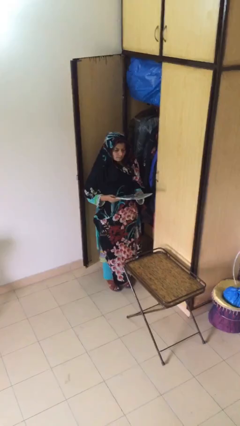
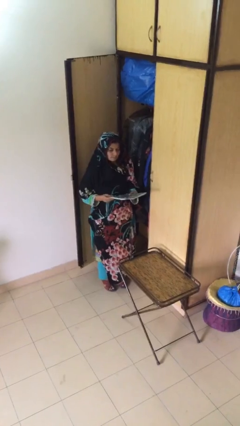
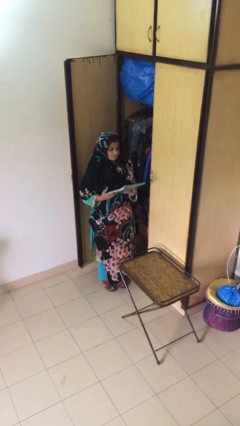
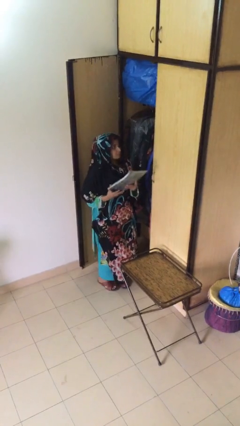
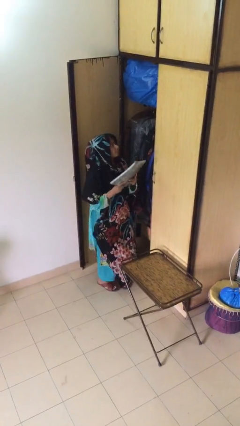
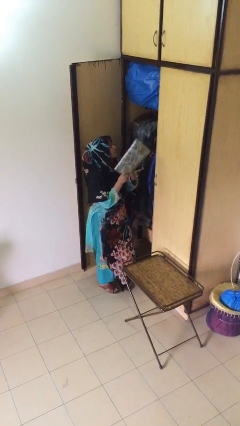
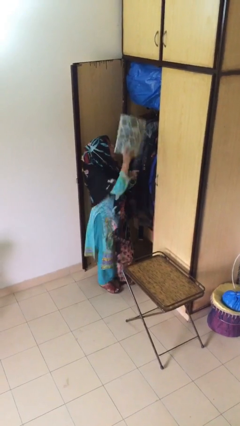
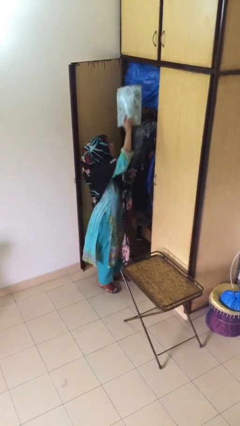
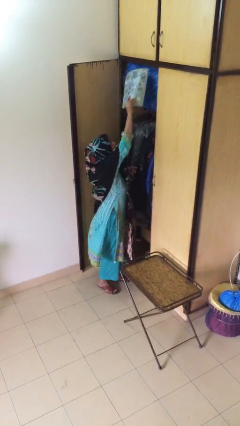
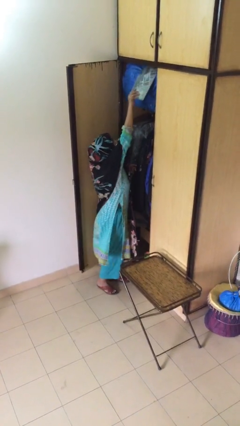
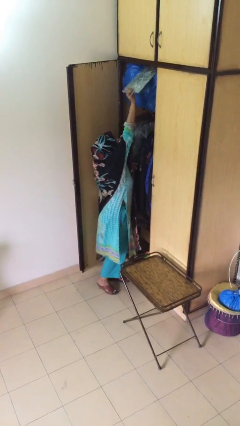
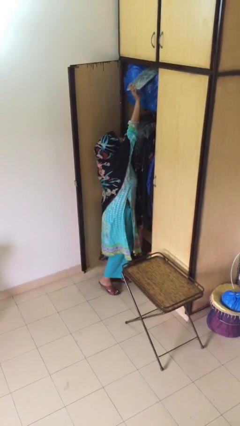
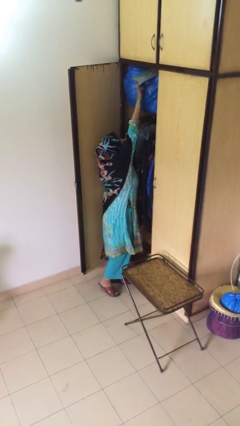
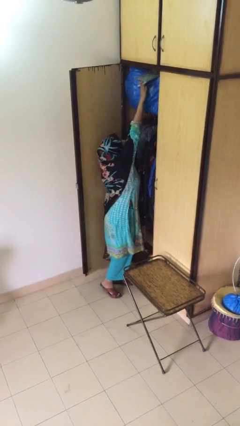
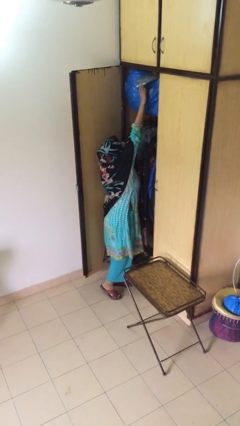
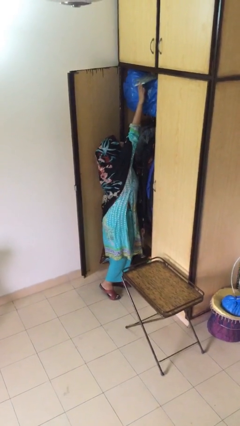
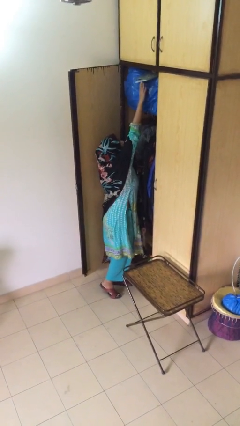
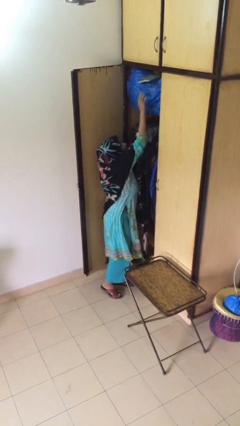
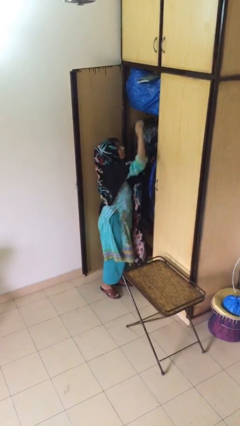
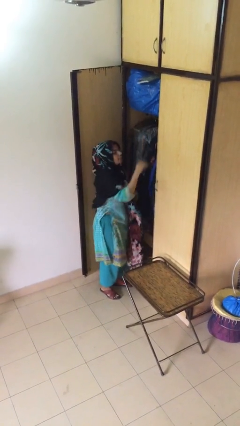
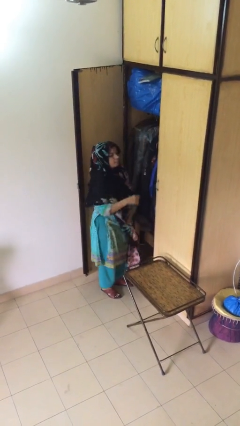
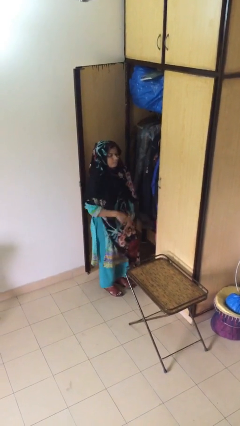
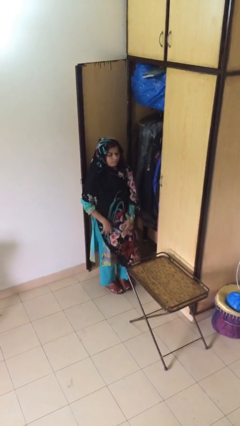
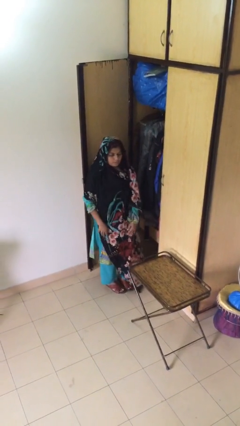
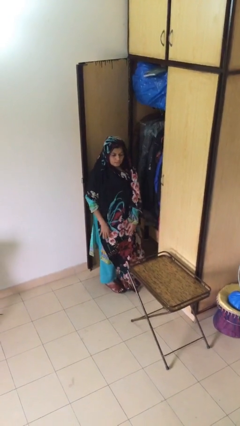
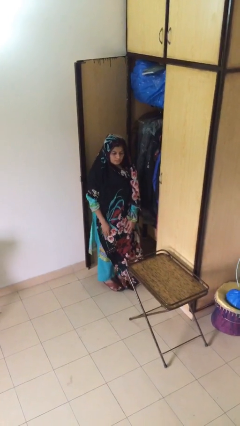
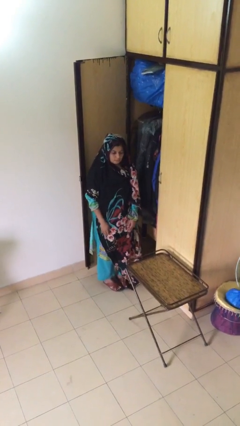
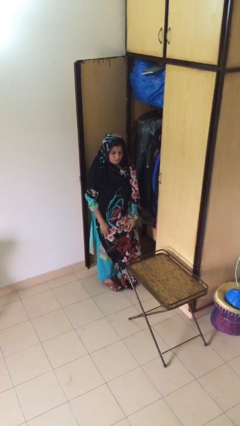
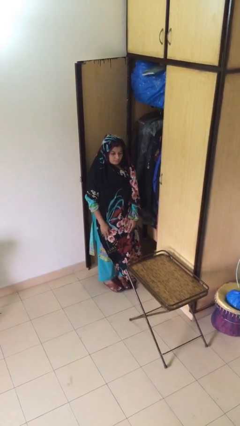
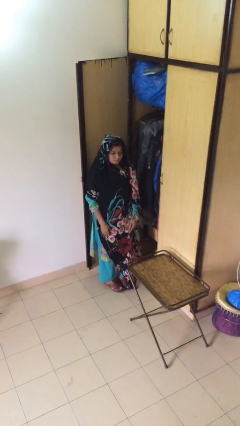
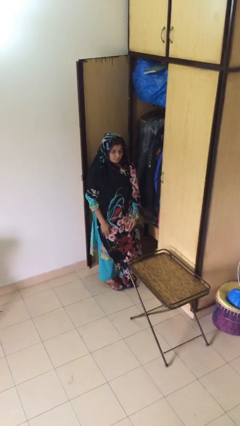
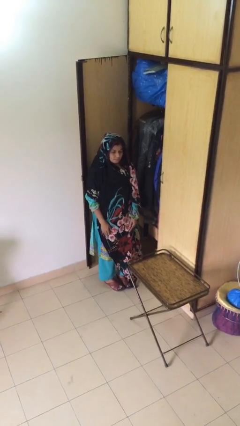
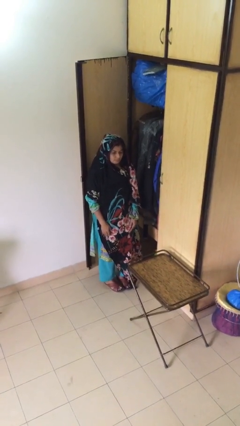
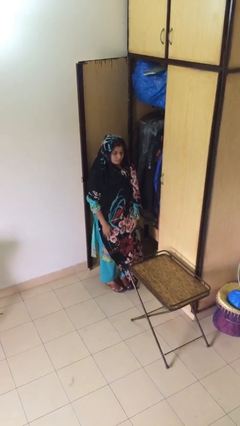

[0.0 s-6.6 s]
person puts down object on shelf

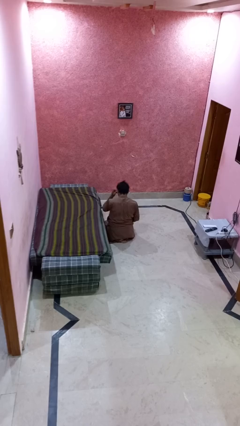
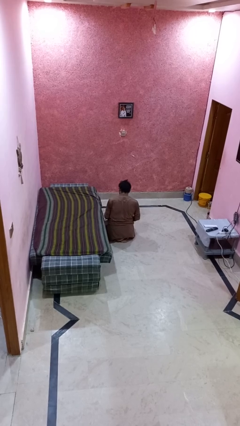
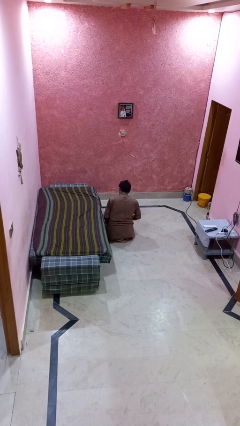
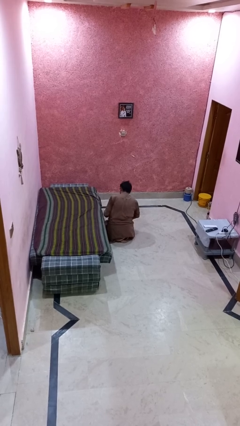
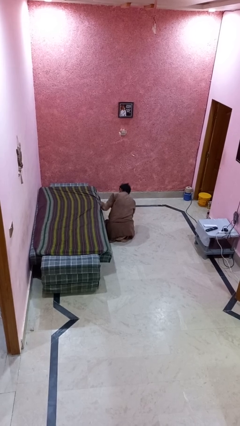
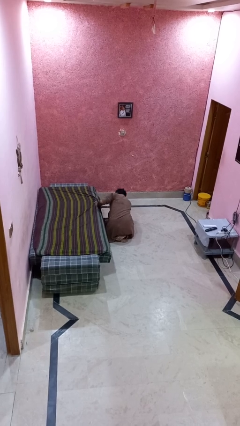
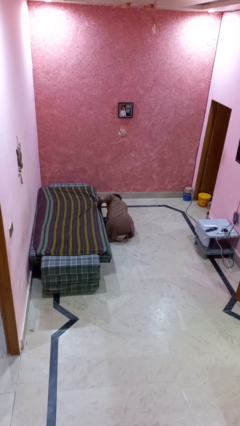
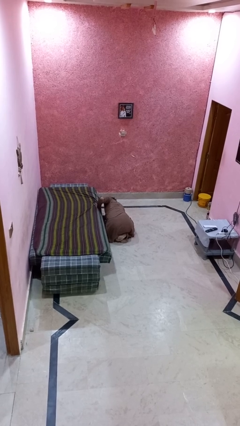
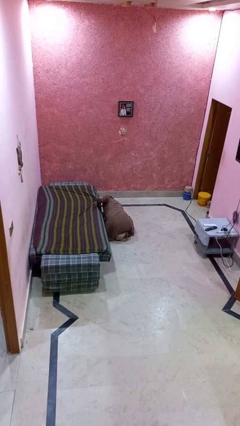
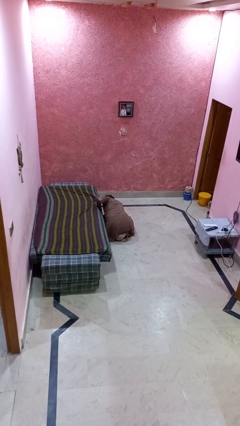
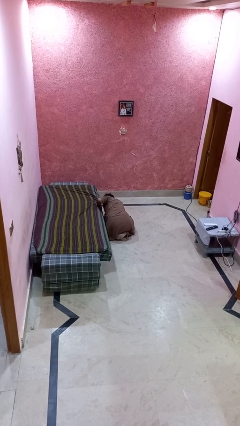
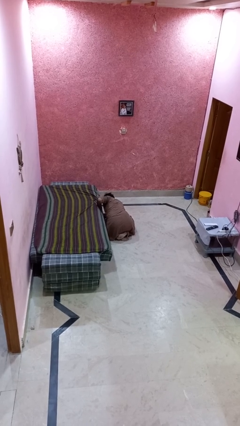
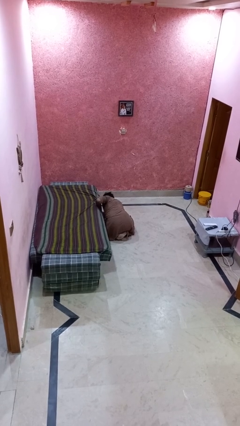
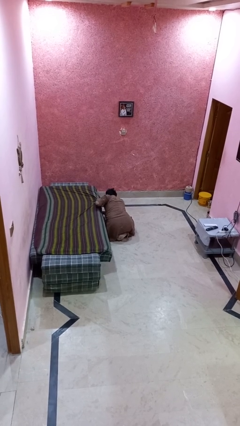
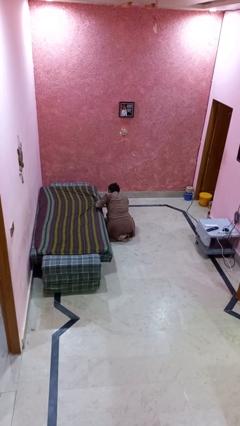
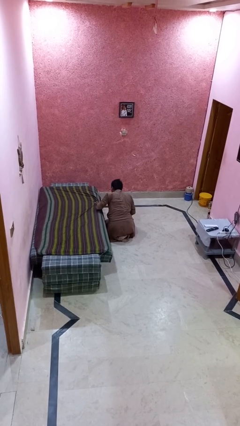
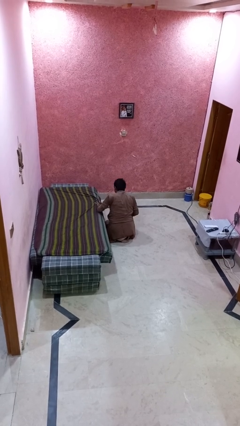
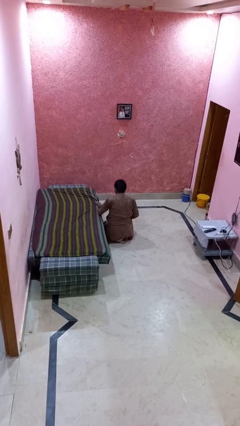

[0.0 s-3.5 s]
person searches under bed

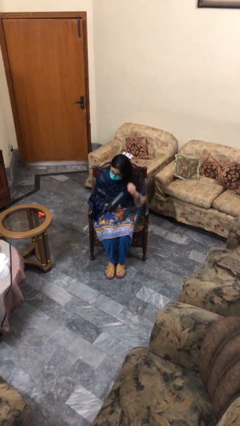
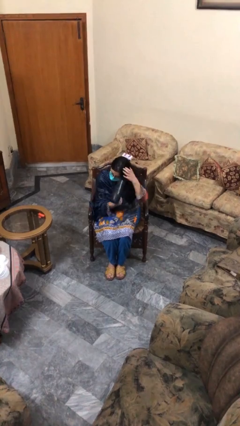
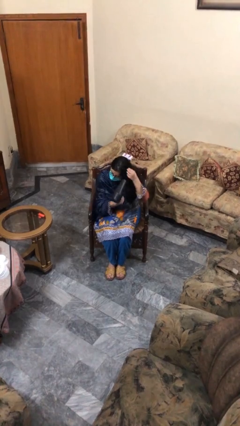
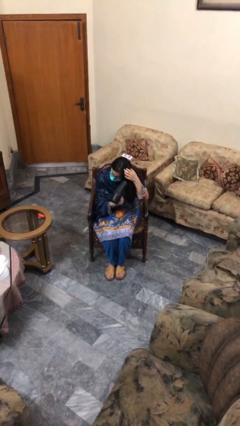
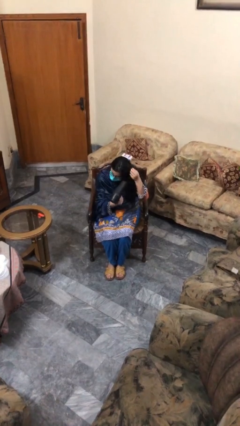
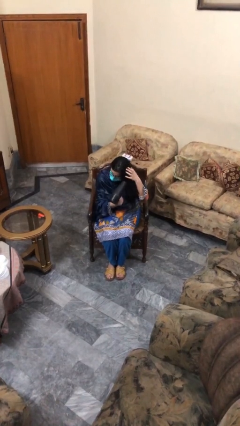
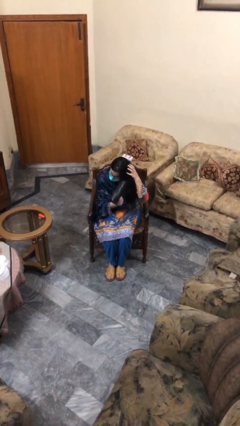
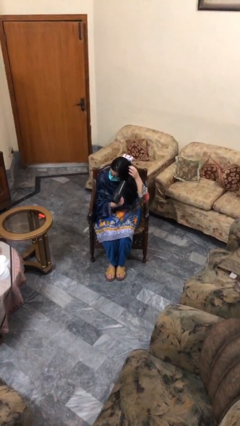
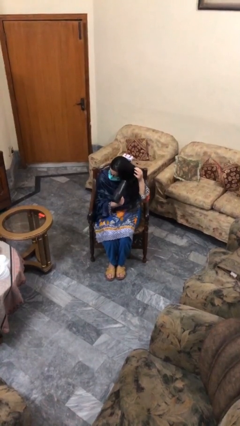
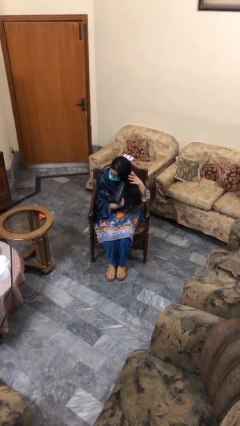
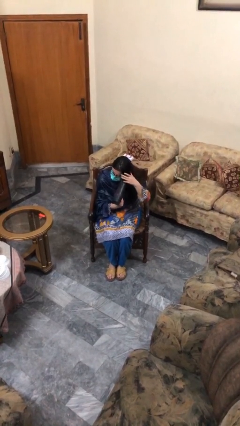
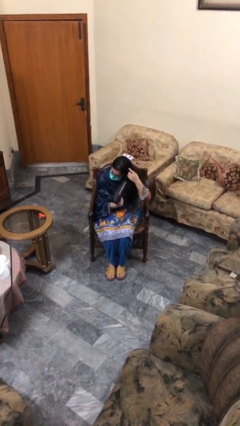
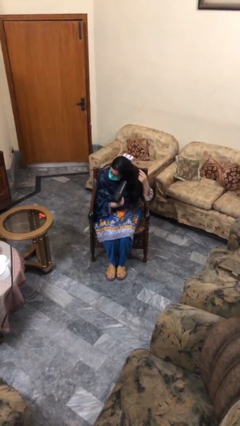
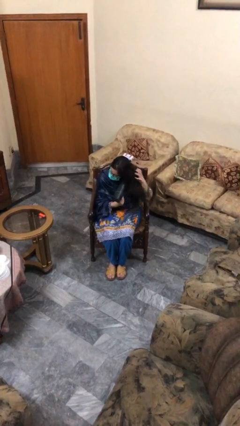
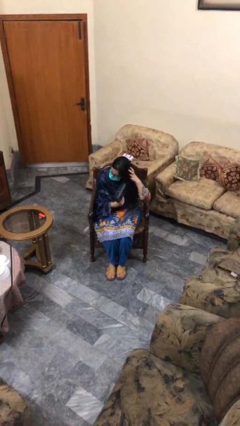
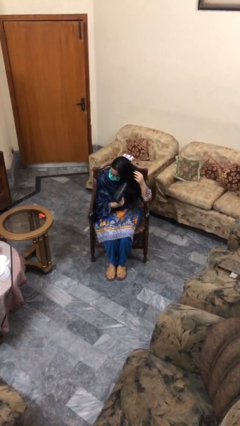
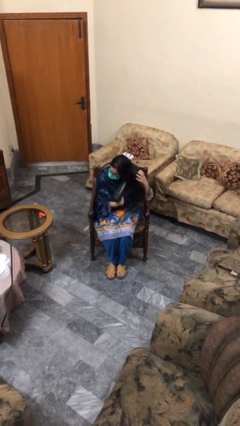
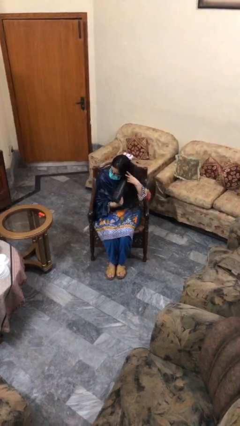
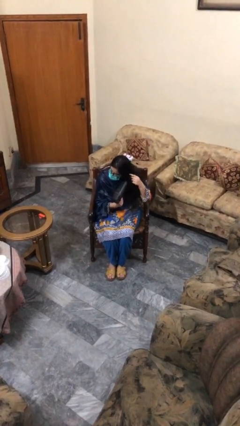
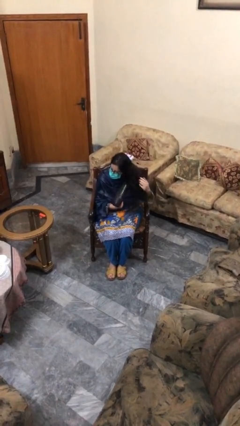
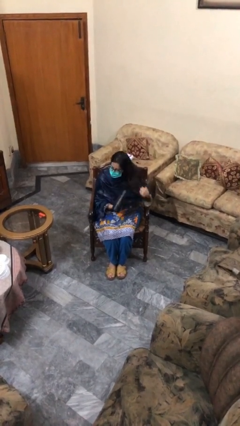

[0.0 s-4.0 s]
person dries hair with hairdryer

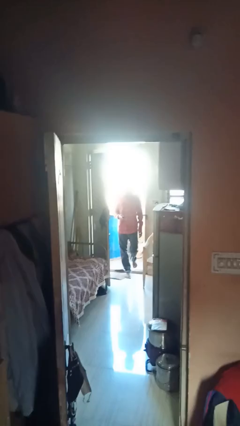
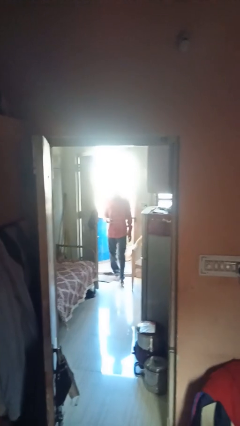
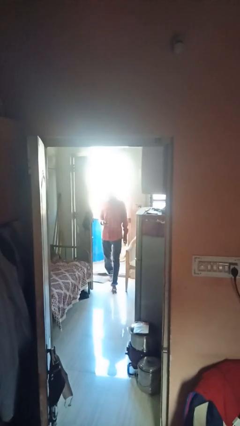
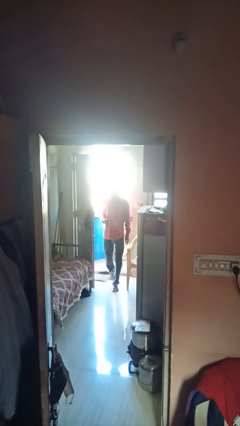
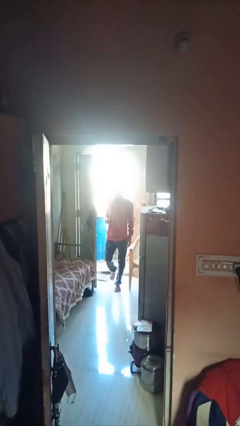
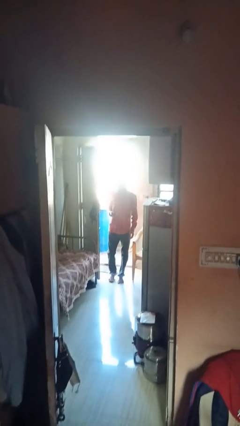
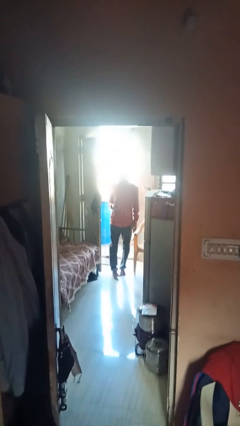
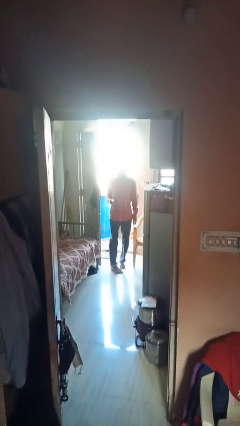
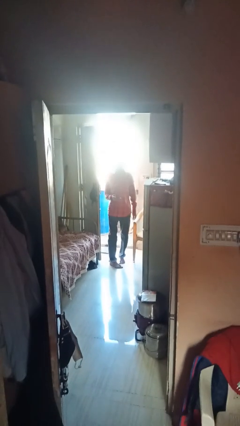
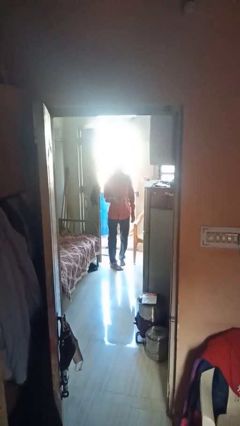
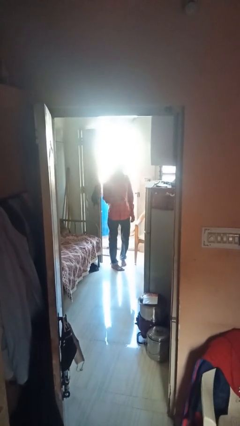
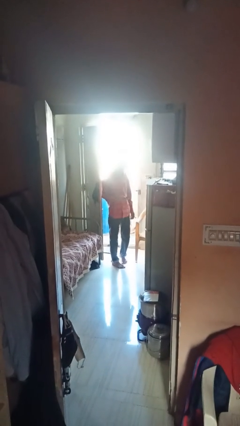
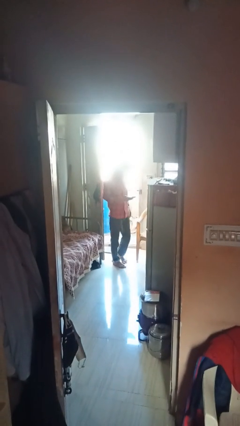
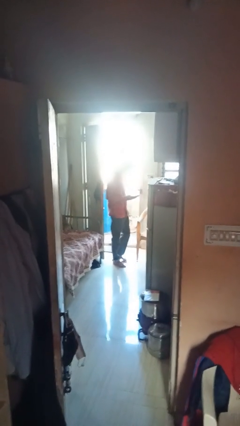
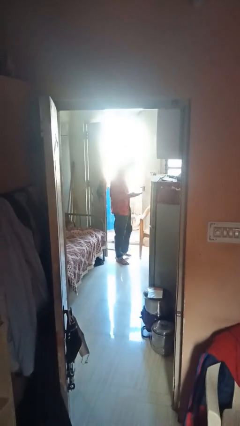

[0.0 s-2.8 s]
person enters scene through structure

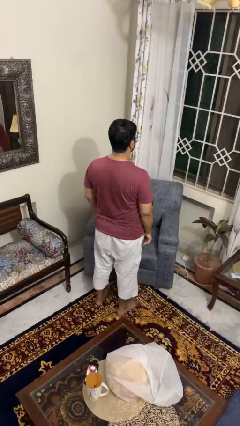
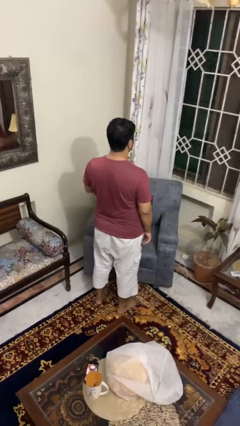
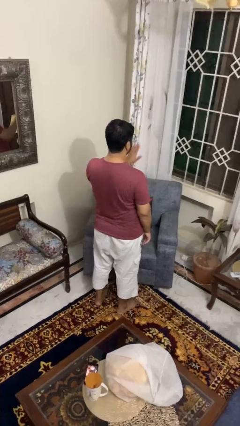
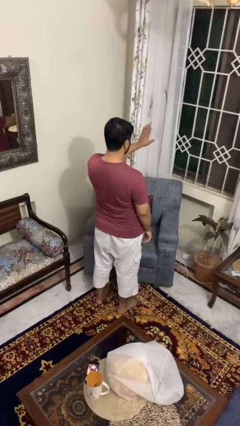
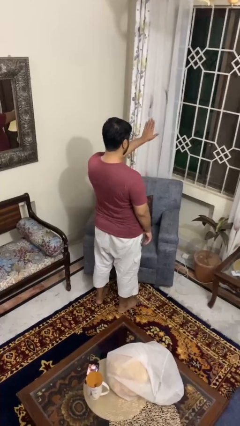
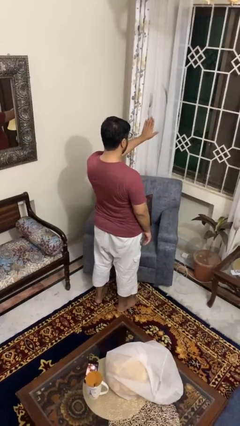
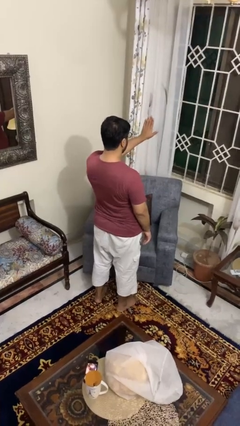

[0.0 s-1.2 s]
person gestures stop
